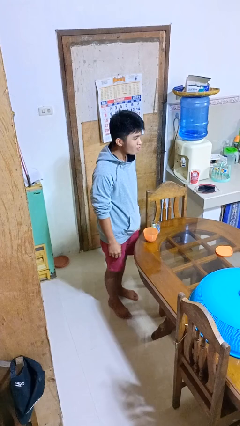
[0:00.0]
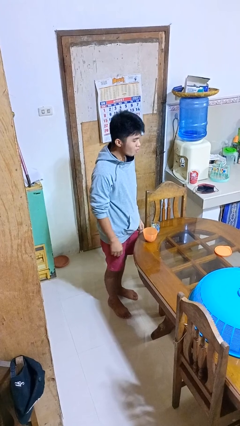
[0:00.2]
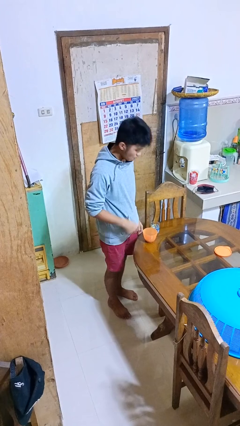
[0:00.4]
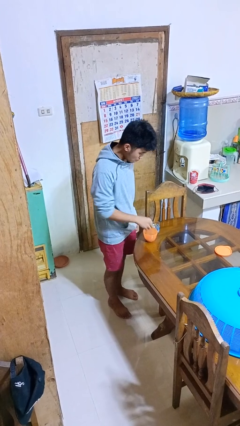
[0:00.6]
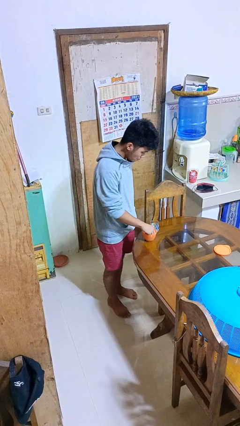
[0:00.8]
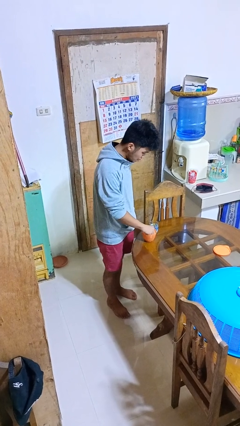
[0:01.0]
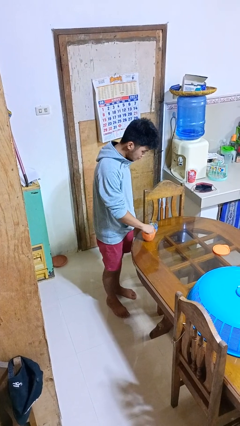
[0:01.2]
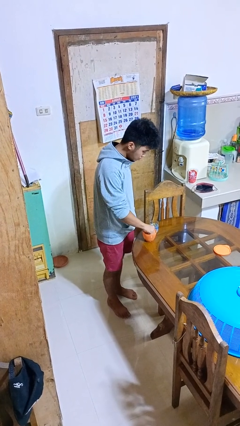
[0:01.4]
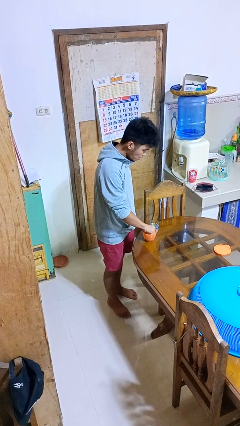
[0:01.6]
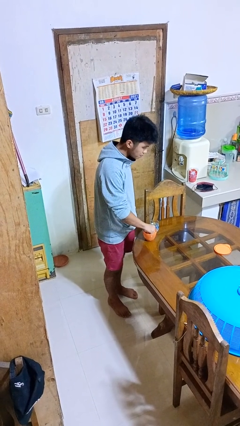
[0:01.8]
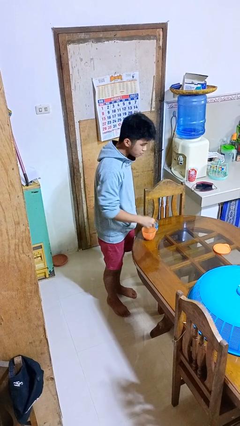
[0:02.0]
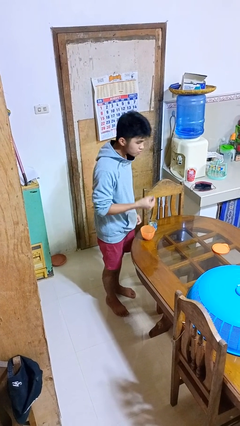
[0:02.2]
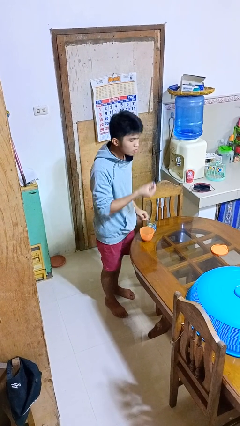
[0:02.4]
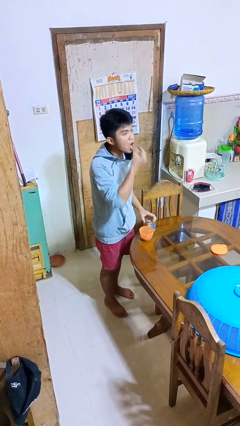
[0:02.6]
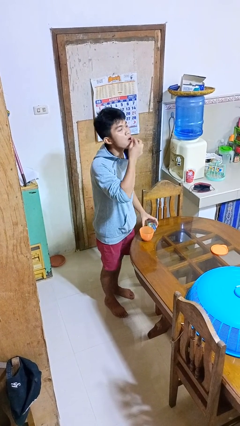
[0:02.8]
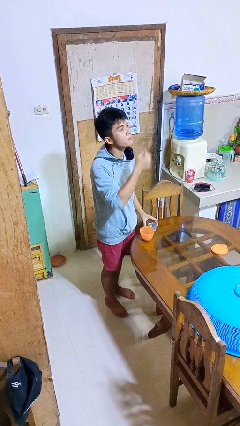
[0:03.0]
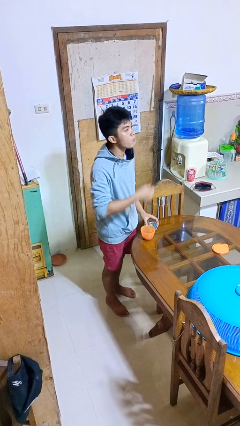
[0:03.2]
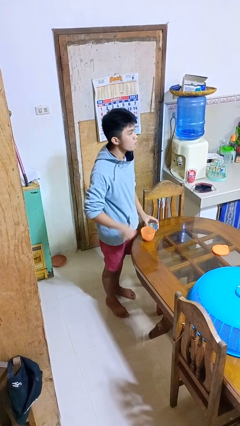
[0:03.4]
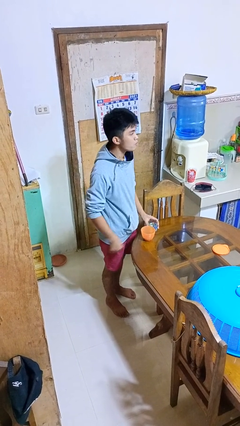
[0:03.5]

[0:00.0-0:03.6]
person takes medicine pills

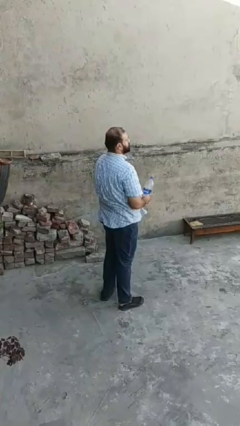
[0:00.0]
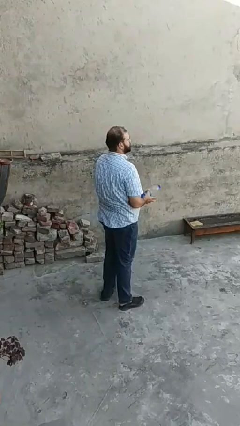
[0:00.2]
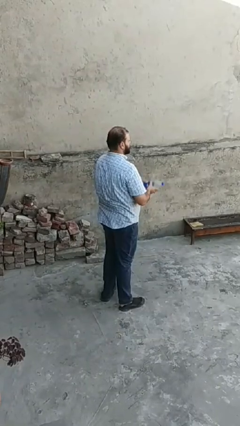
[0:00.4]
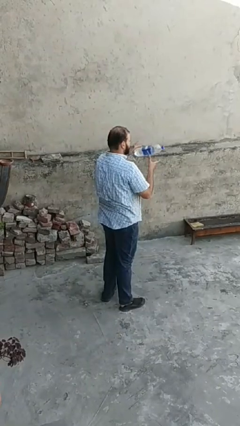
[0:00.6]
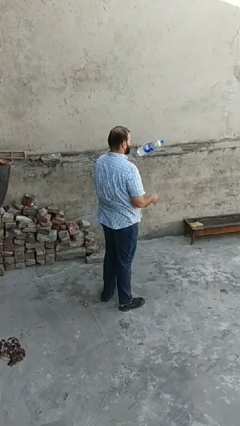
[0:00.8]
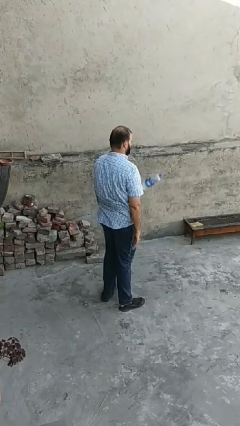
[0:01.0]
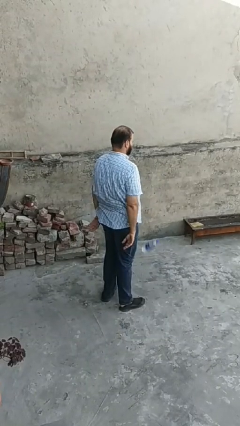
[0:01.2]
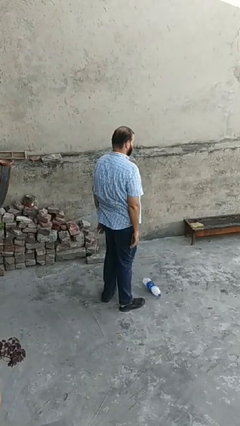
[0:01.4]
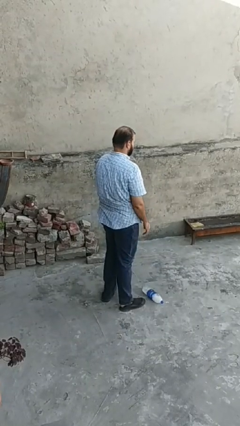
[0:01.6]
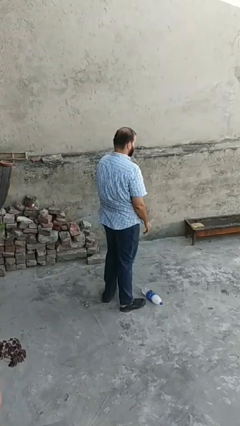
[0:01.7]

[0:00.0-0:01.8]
person throws object into air

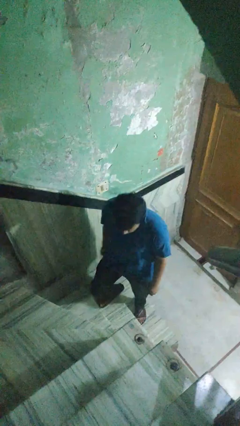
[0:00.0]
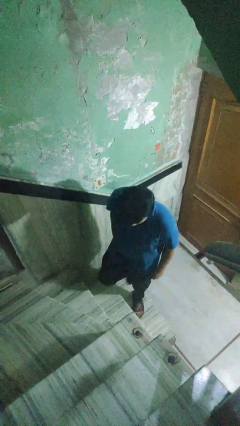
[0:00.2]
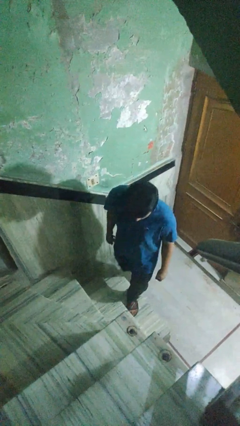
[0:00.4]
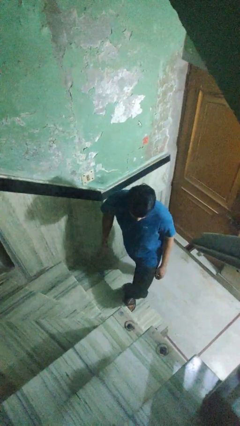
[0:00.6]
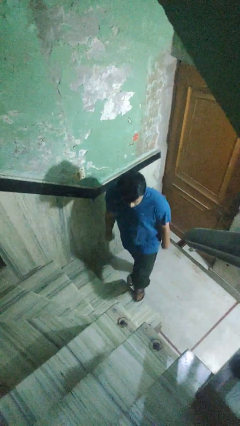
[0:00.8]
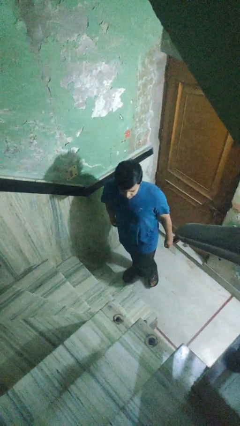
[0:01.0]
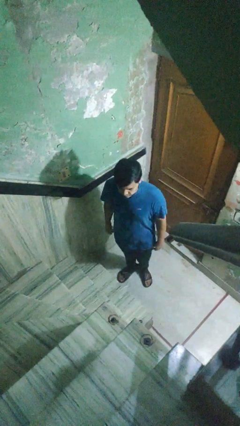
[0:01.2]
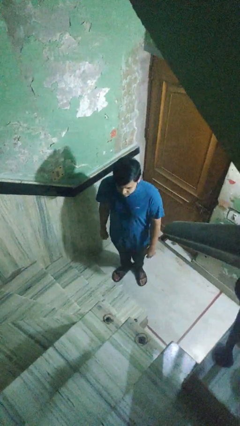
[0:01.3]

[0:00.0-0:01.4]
person climbs down stairs

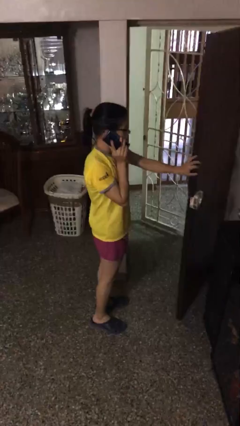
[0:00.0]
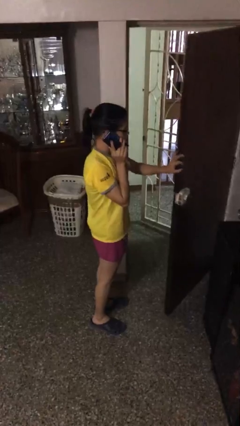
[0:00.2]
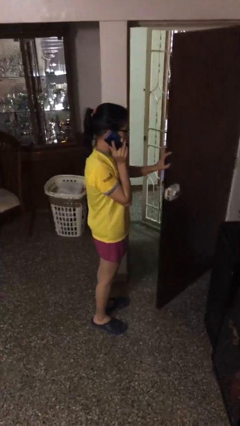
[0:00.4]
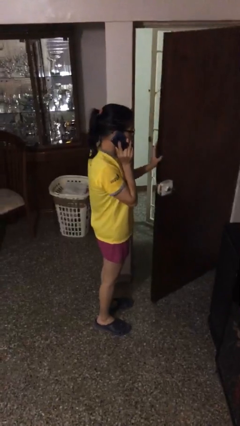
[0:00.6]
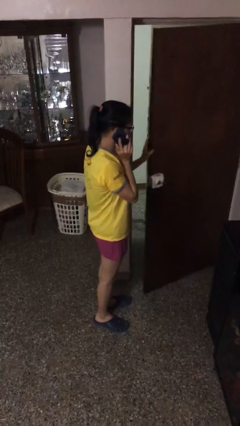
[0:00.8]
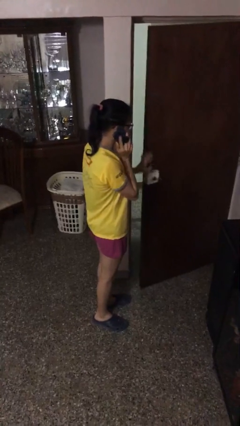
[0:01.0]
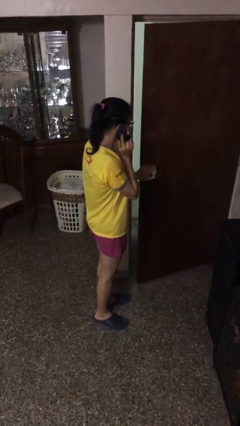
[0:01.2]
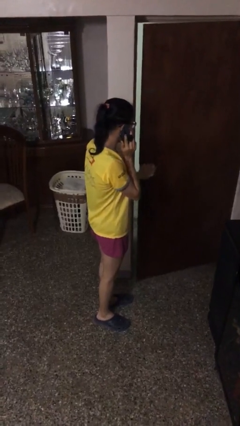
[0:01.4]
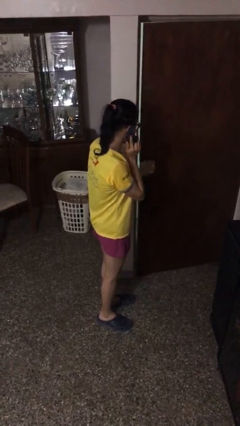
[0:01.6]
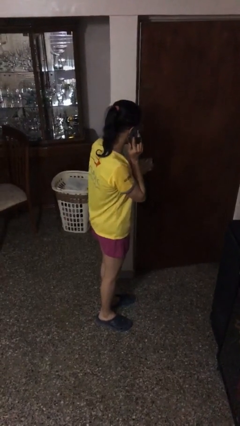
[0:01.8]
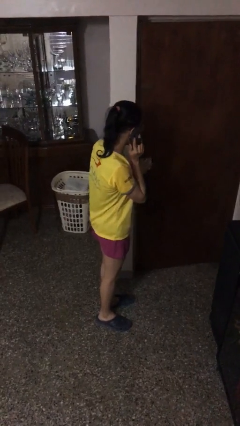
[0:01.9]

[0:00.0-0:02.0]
person closes facility door

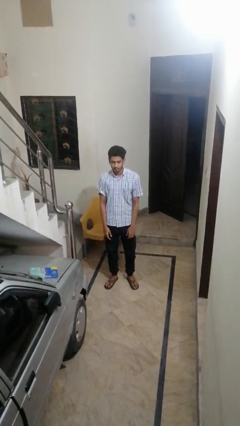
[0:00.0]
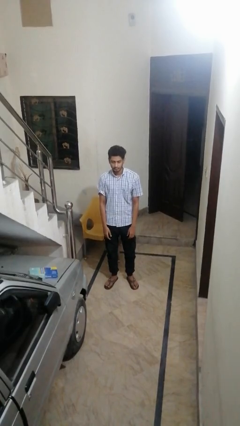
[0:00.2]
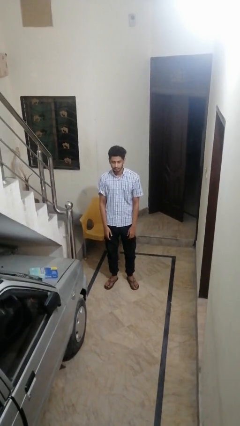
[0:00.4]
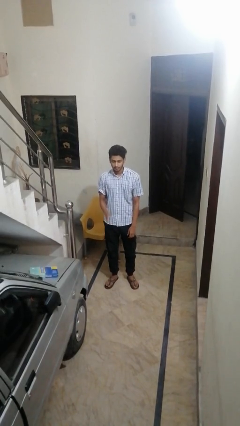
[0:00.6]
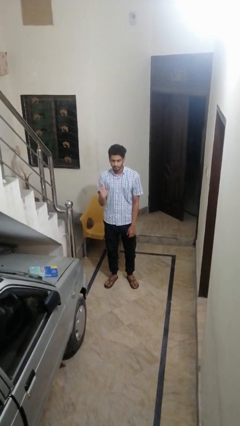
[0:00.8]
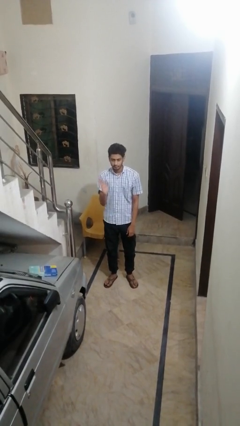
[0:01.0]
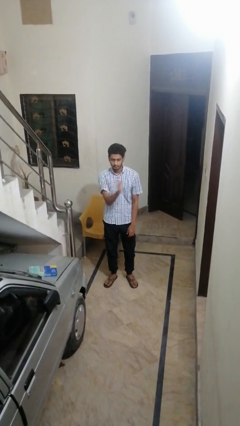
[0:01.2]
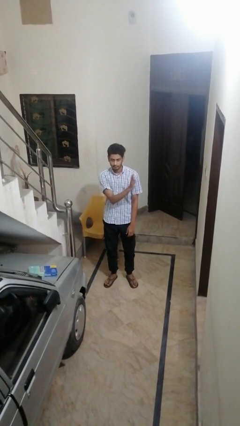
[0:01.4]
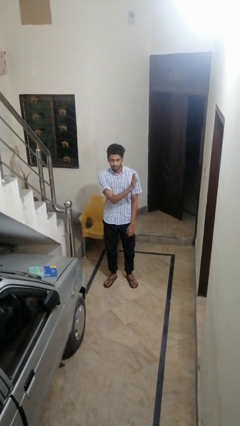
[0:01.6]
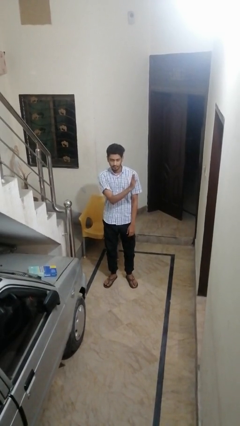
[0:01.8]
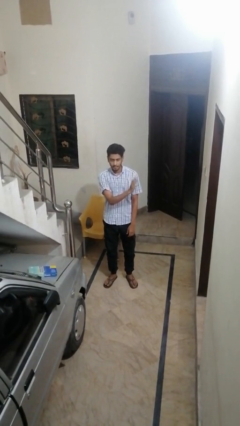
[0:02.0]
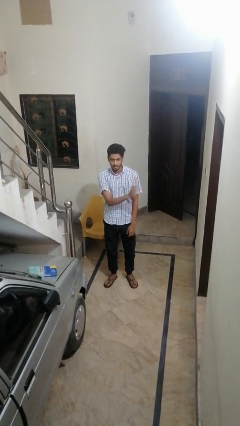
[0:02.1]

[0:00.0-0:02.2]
person gestures swipe left

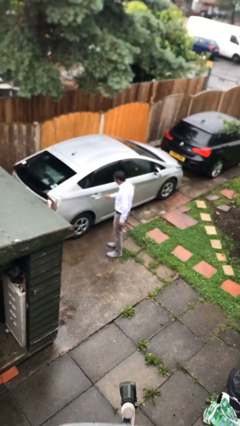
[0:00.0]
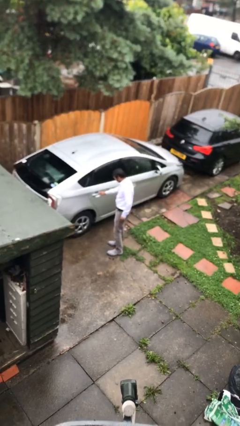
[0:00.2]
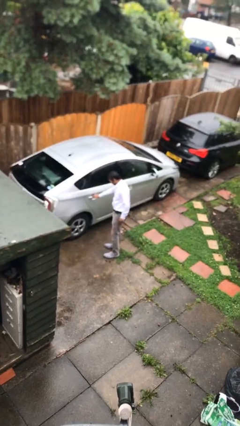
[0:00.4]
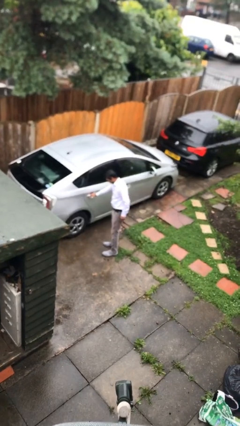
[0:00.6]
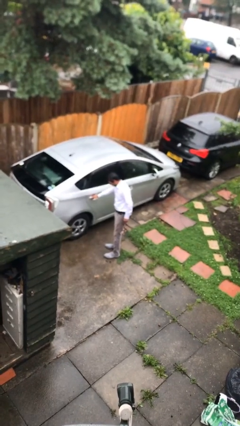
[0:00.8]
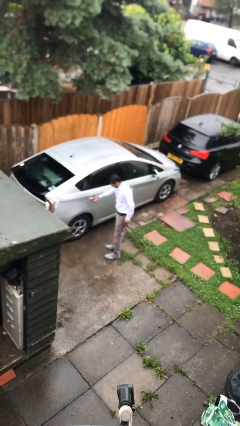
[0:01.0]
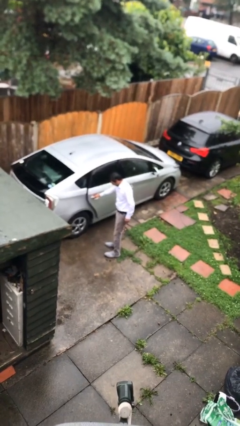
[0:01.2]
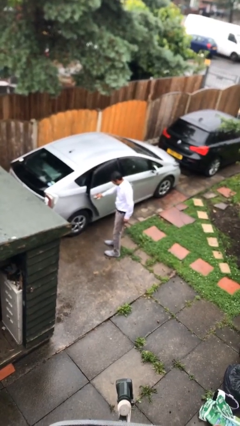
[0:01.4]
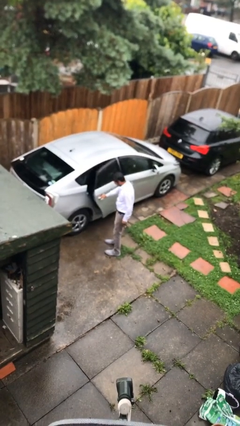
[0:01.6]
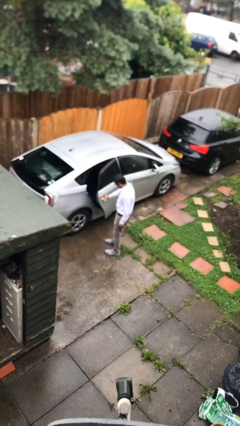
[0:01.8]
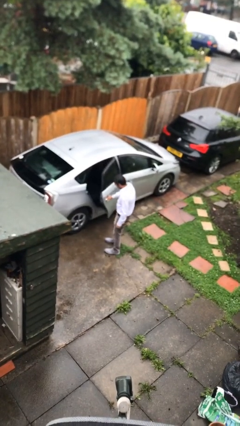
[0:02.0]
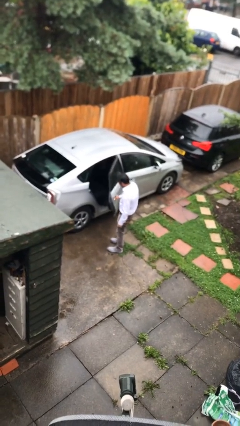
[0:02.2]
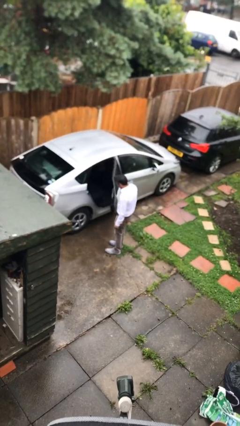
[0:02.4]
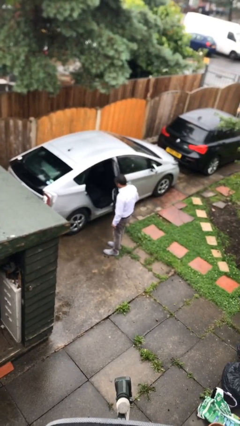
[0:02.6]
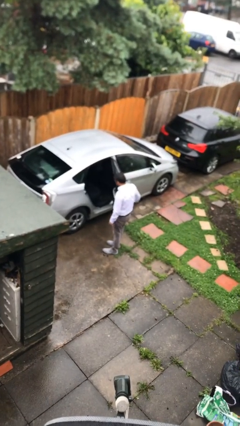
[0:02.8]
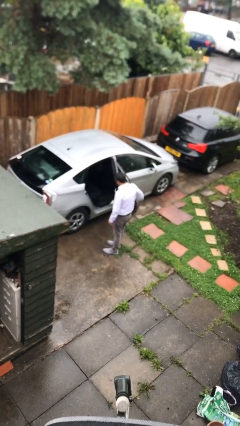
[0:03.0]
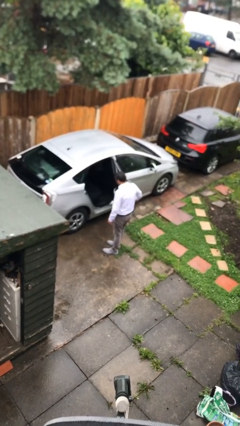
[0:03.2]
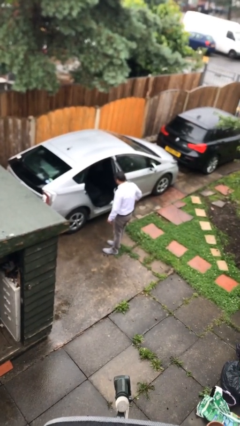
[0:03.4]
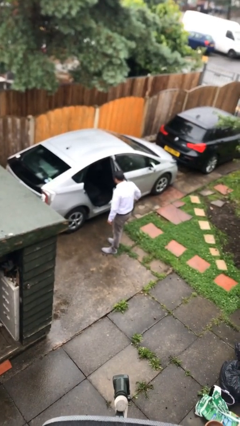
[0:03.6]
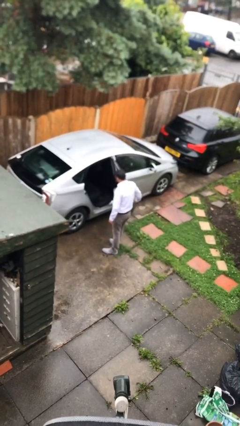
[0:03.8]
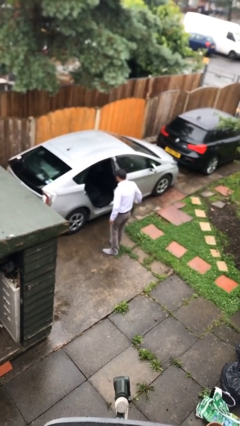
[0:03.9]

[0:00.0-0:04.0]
person opens car door

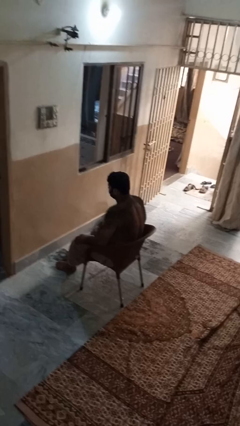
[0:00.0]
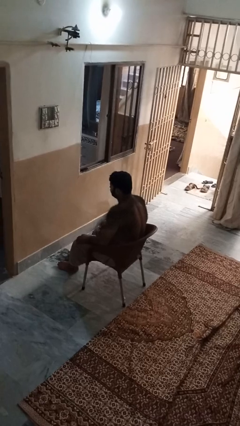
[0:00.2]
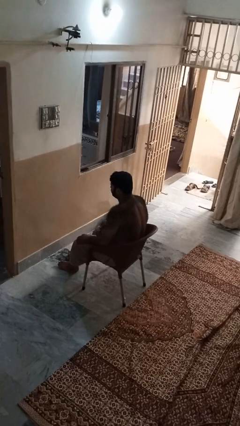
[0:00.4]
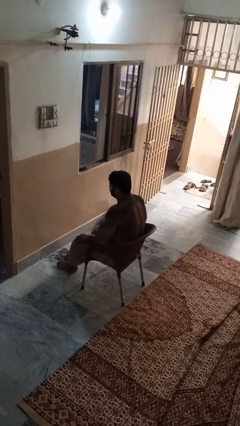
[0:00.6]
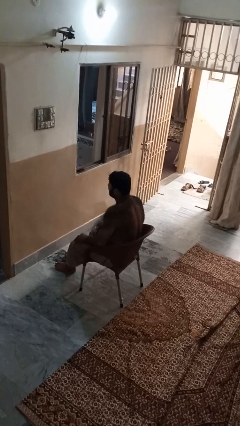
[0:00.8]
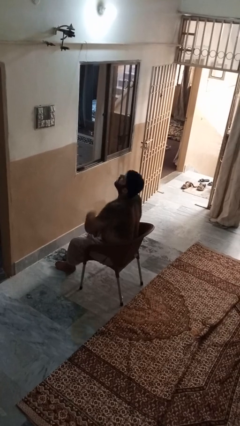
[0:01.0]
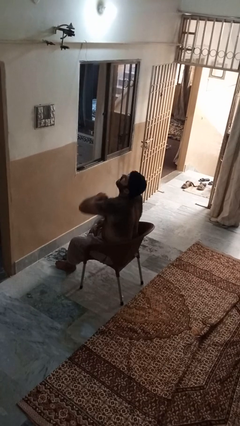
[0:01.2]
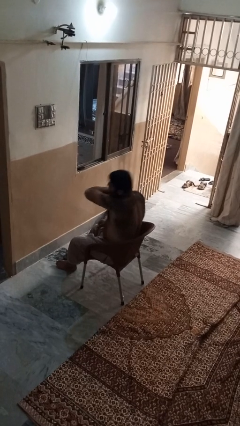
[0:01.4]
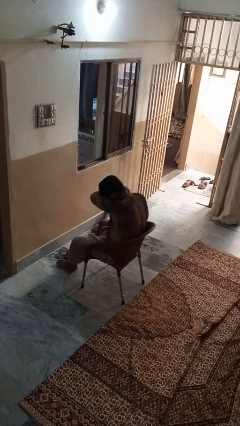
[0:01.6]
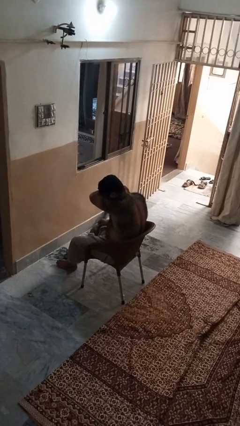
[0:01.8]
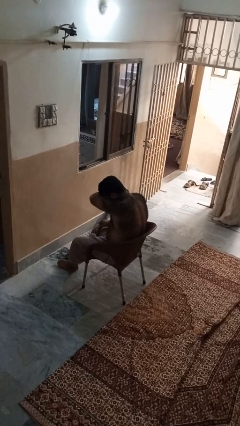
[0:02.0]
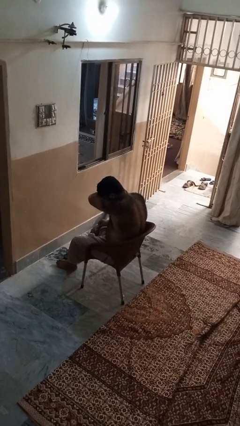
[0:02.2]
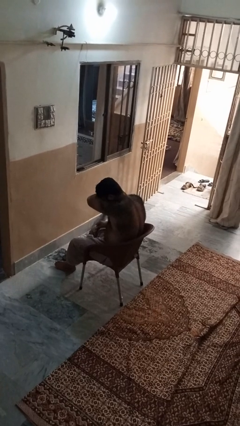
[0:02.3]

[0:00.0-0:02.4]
person sneezes into arm
